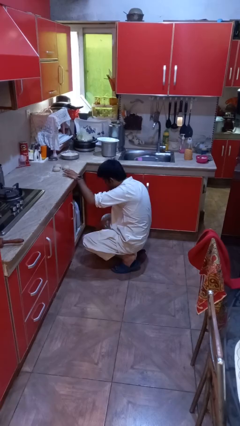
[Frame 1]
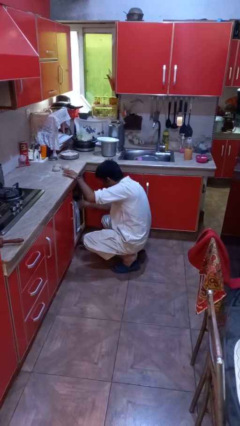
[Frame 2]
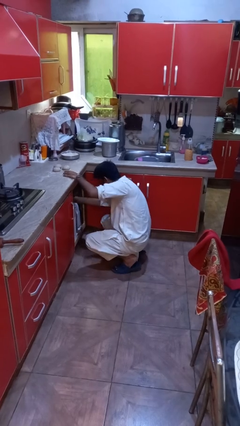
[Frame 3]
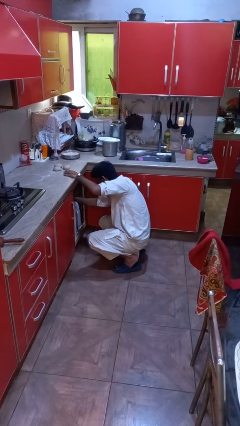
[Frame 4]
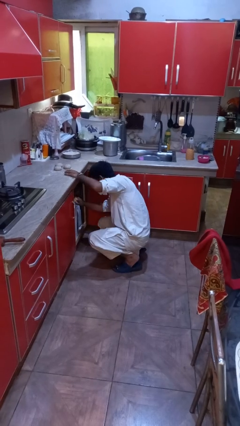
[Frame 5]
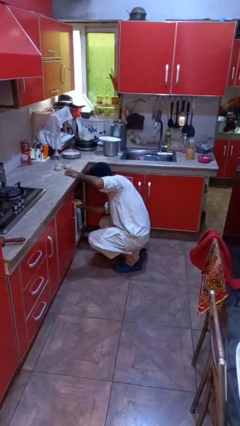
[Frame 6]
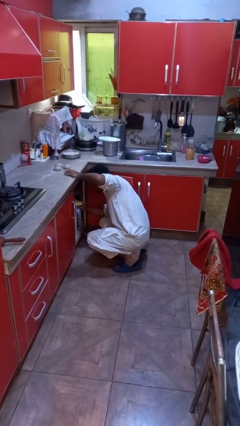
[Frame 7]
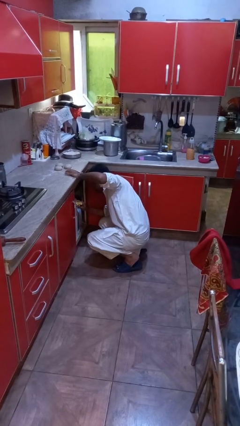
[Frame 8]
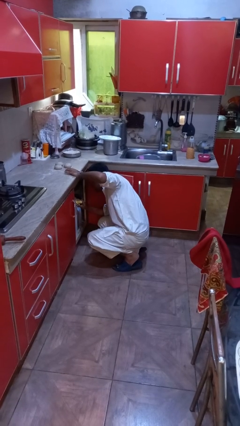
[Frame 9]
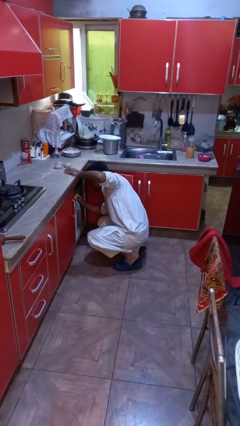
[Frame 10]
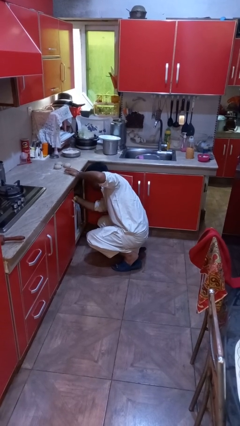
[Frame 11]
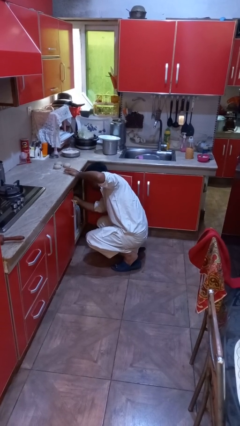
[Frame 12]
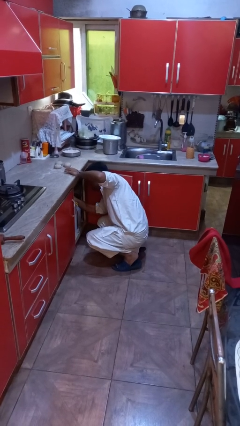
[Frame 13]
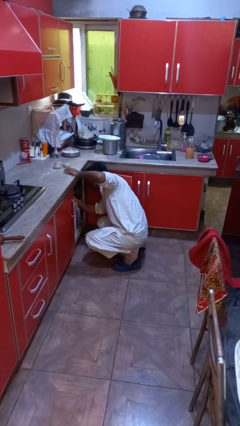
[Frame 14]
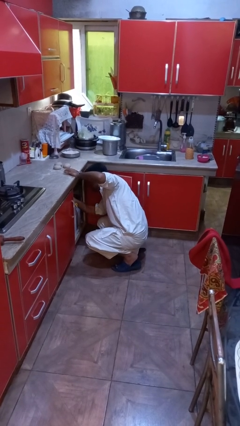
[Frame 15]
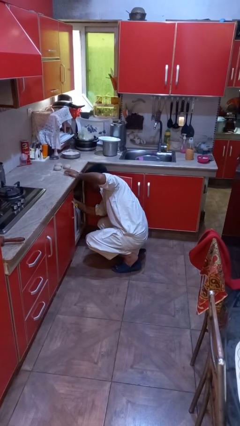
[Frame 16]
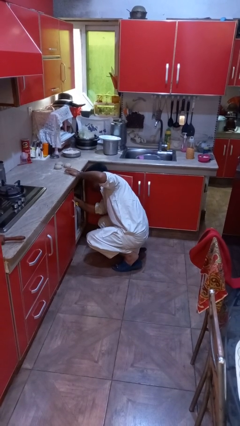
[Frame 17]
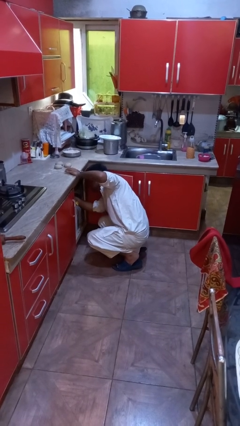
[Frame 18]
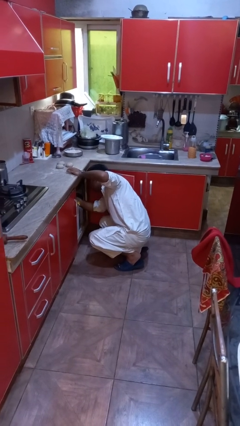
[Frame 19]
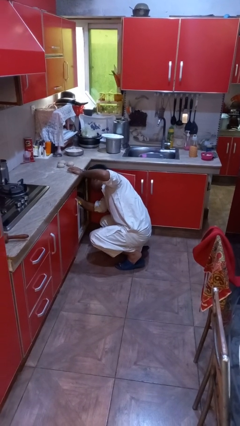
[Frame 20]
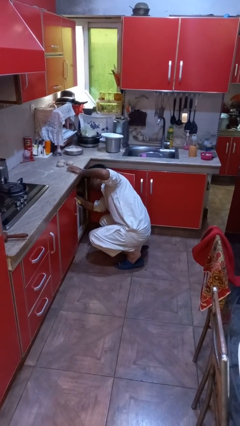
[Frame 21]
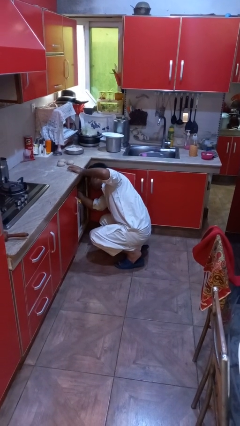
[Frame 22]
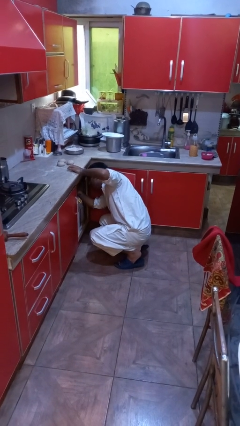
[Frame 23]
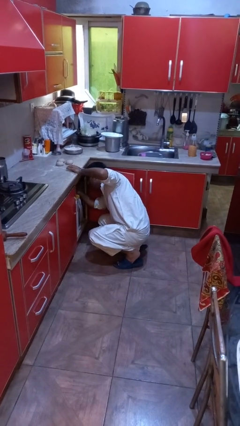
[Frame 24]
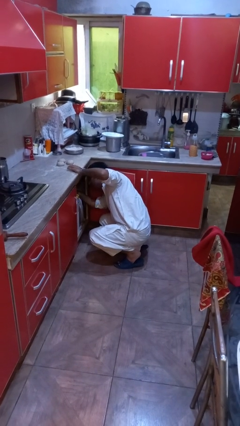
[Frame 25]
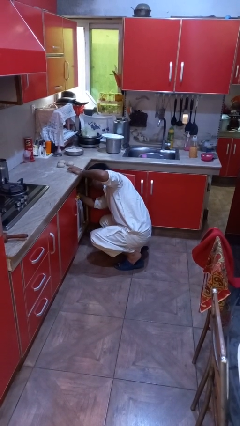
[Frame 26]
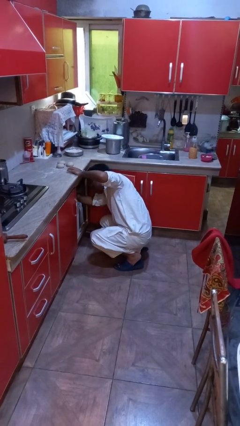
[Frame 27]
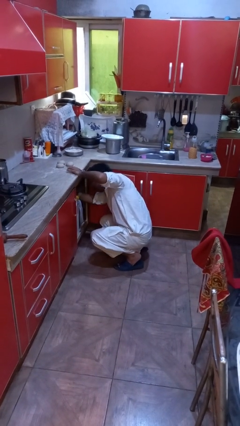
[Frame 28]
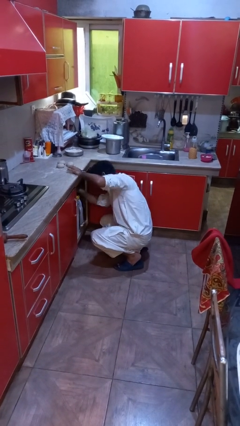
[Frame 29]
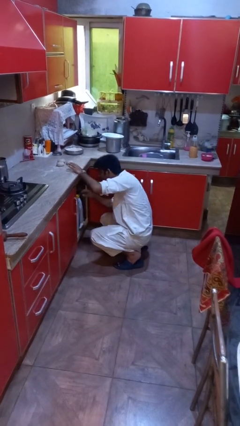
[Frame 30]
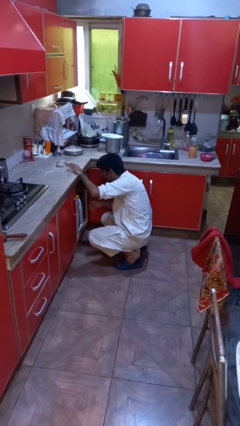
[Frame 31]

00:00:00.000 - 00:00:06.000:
person searches in cabinet

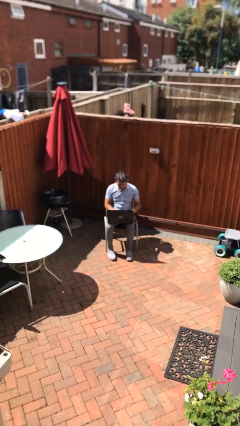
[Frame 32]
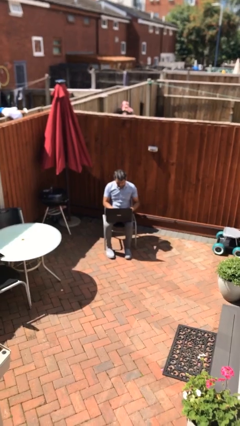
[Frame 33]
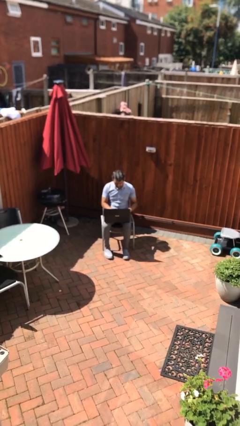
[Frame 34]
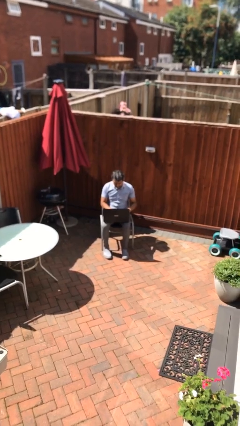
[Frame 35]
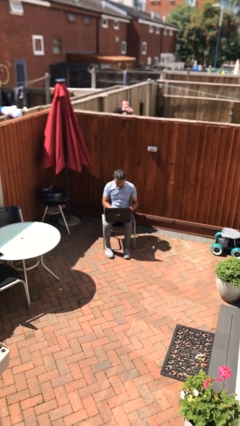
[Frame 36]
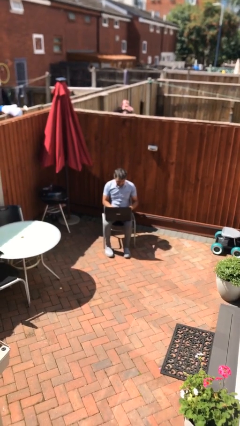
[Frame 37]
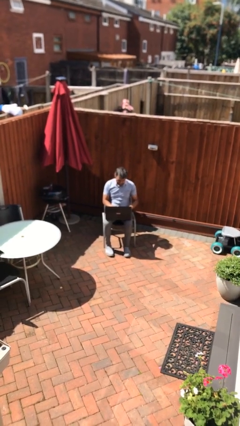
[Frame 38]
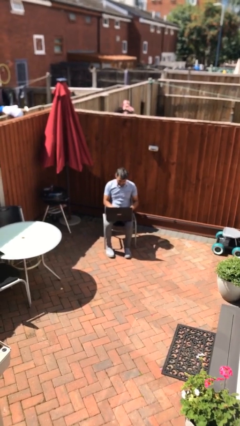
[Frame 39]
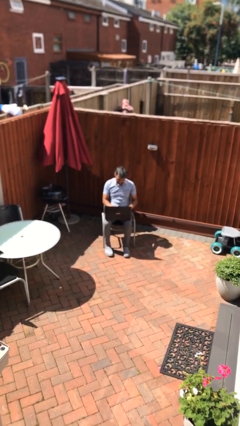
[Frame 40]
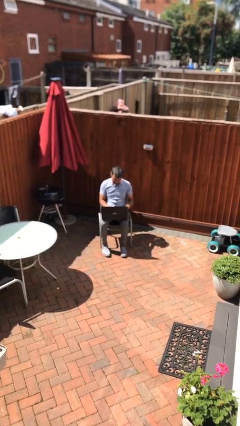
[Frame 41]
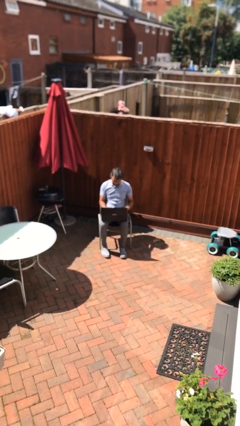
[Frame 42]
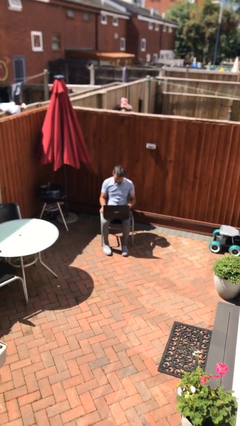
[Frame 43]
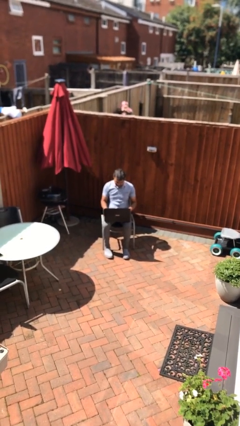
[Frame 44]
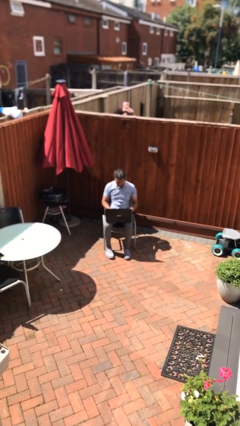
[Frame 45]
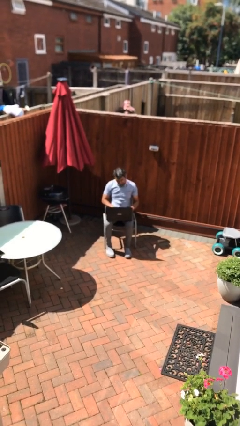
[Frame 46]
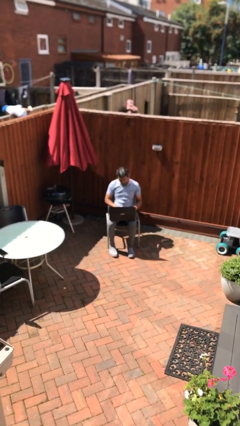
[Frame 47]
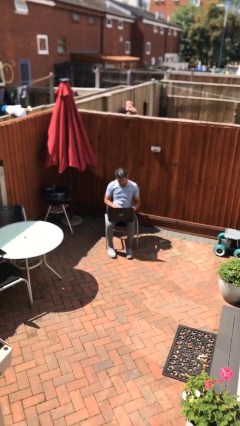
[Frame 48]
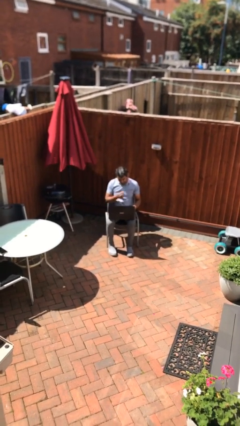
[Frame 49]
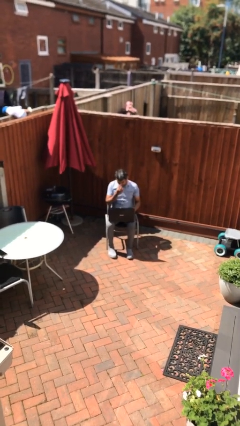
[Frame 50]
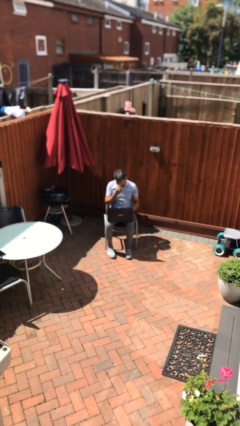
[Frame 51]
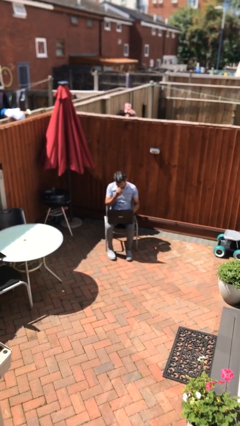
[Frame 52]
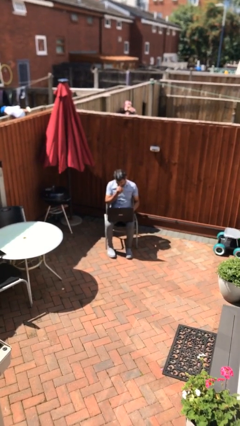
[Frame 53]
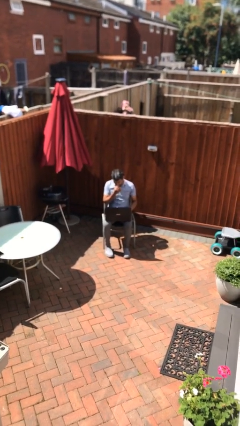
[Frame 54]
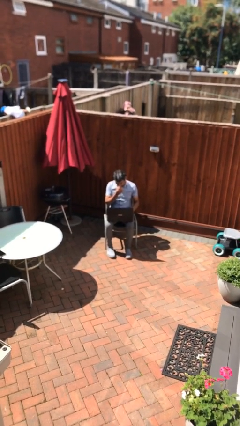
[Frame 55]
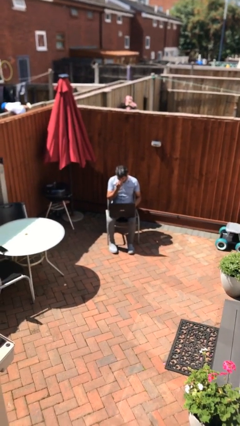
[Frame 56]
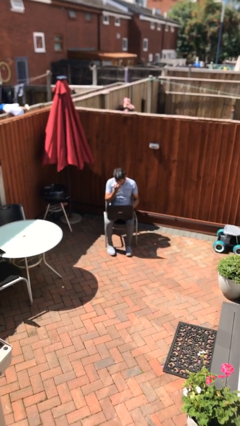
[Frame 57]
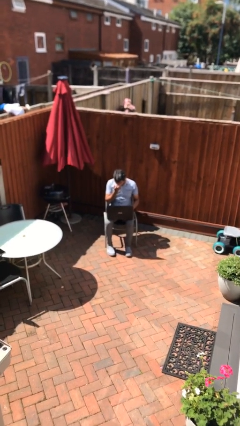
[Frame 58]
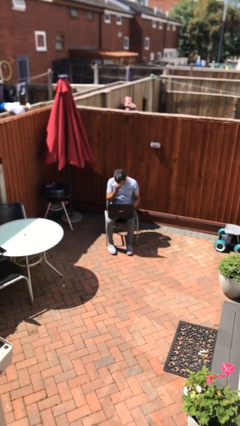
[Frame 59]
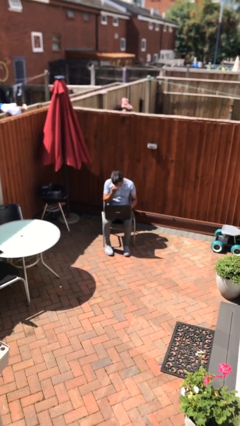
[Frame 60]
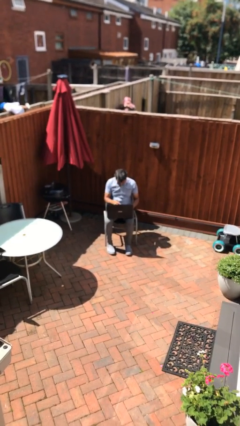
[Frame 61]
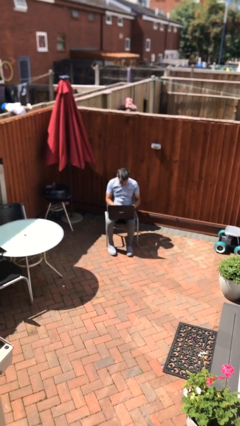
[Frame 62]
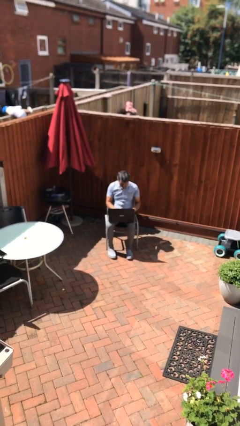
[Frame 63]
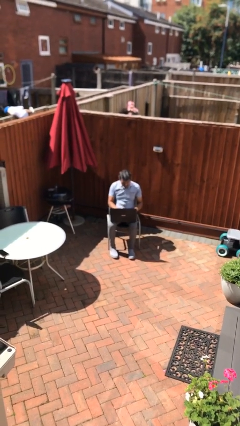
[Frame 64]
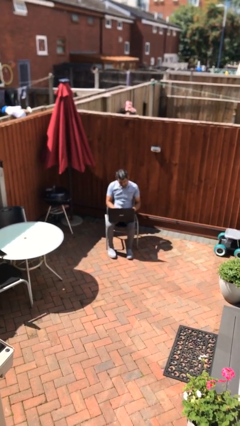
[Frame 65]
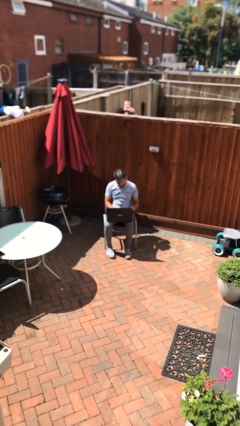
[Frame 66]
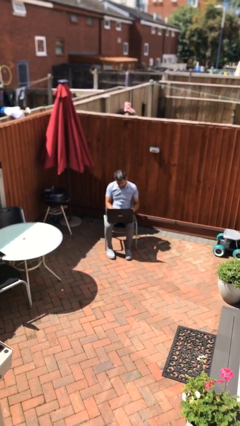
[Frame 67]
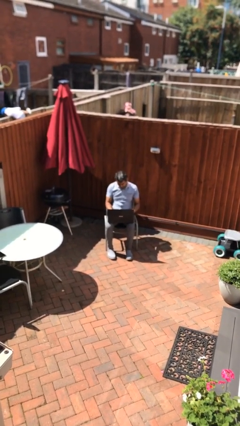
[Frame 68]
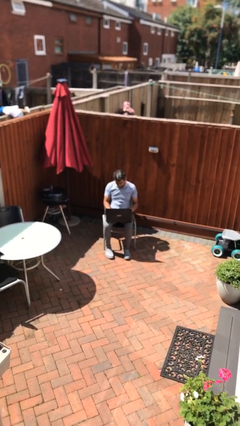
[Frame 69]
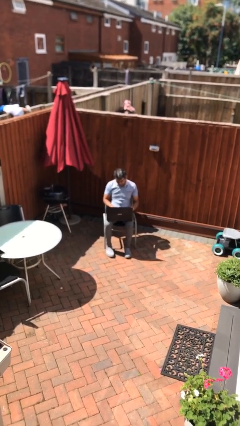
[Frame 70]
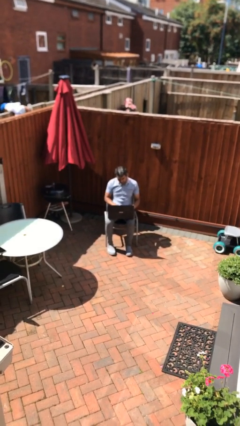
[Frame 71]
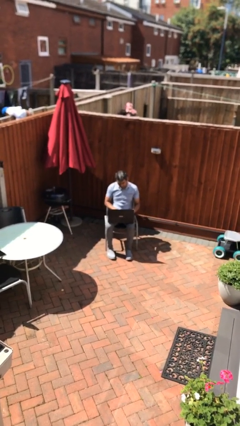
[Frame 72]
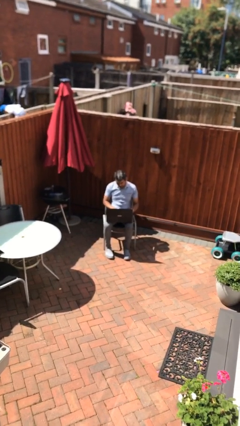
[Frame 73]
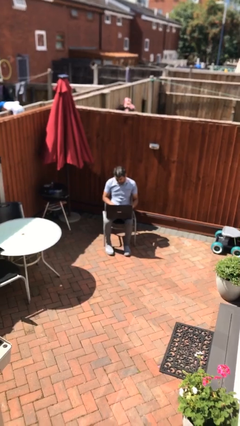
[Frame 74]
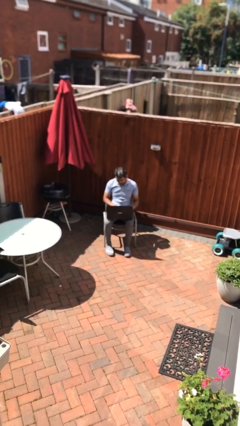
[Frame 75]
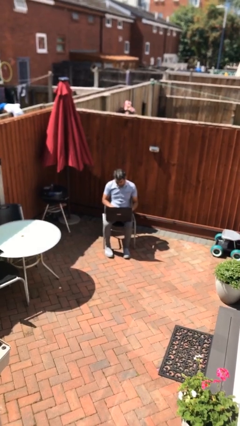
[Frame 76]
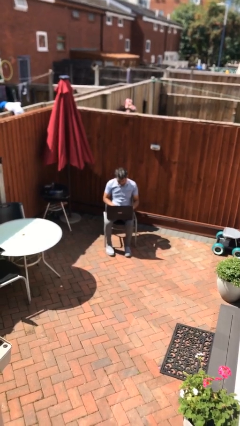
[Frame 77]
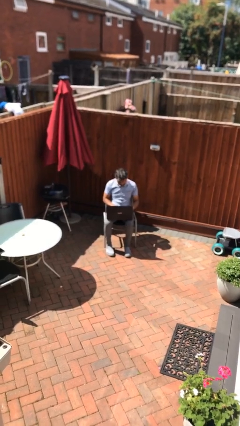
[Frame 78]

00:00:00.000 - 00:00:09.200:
person interacts with laptop

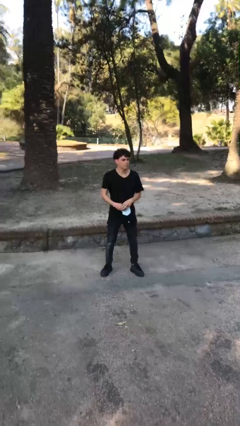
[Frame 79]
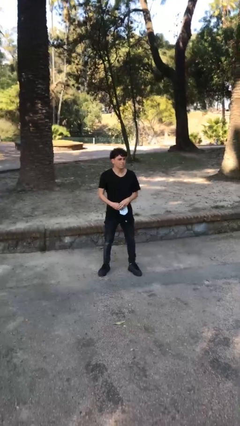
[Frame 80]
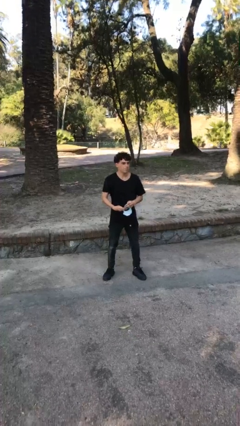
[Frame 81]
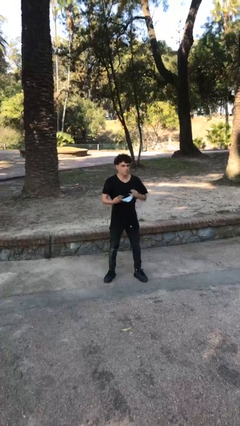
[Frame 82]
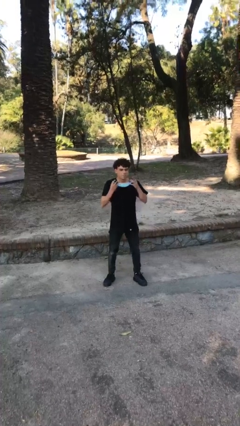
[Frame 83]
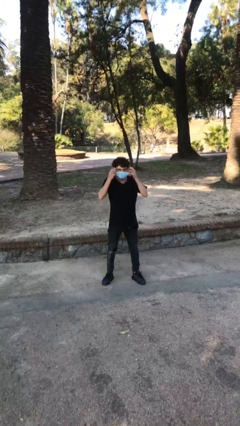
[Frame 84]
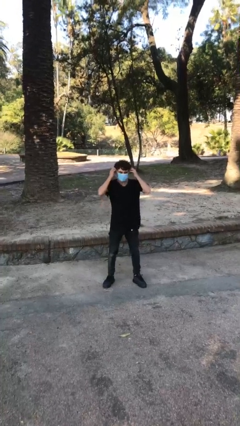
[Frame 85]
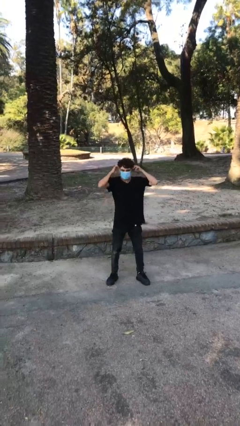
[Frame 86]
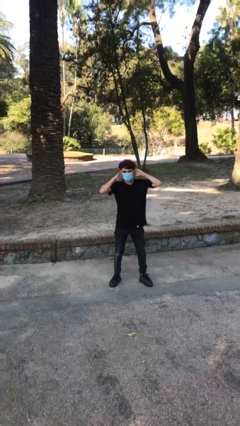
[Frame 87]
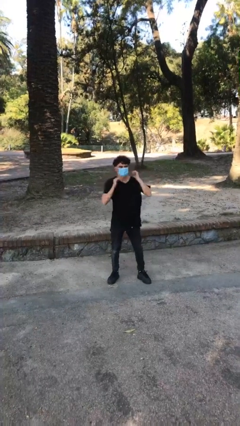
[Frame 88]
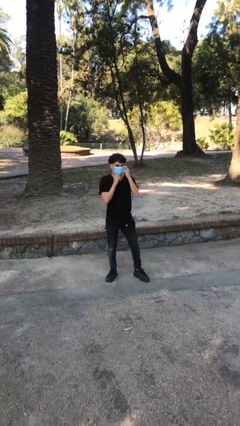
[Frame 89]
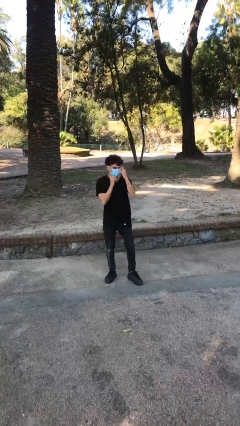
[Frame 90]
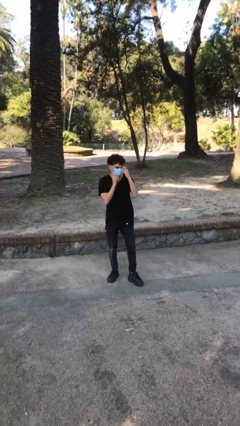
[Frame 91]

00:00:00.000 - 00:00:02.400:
person puts on facemask

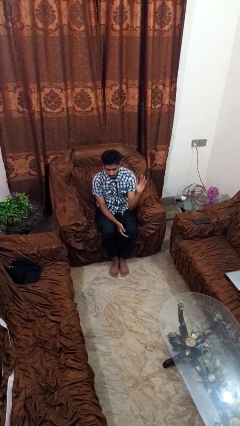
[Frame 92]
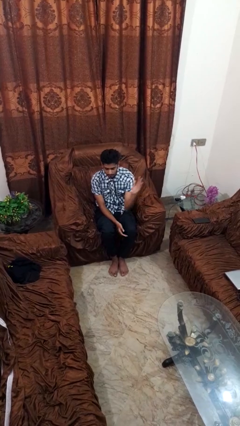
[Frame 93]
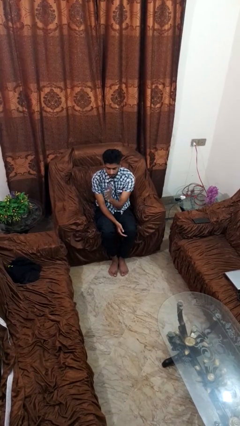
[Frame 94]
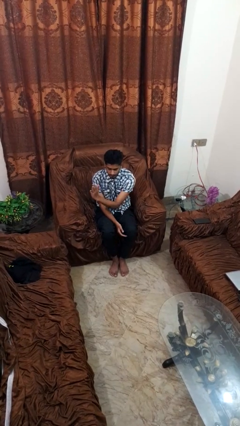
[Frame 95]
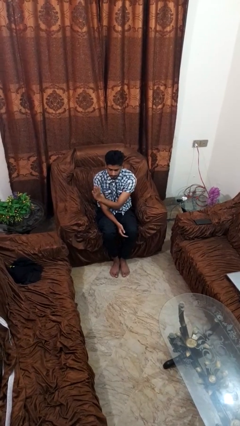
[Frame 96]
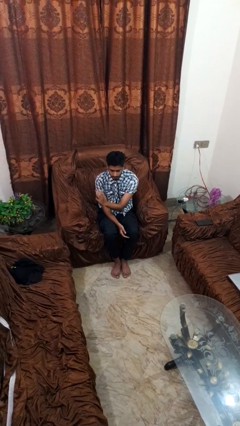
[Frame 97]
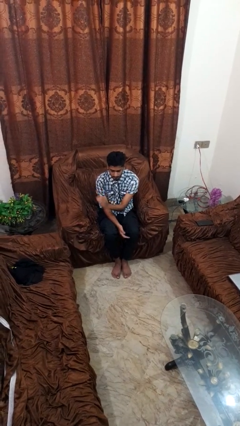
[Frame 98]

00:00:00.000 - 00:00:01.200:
person gestures swipe right
